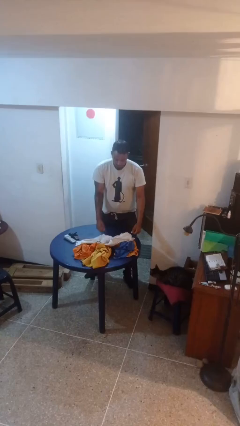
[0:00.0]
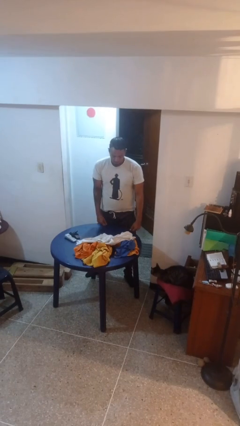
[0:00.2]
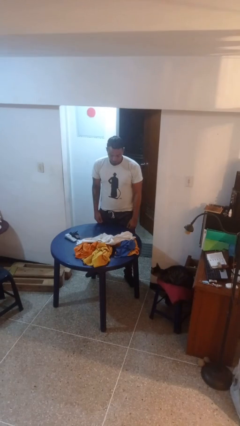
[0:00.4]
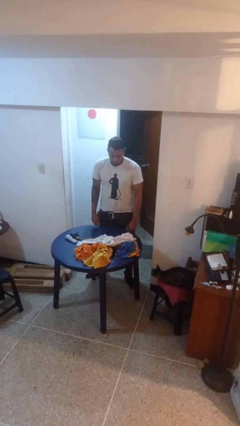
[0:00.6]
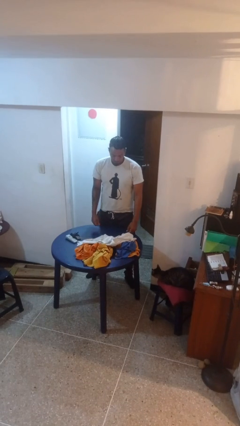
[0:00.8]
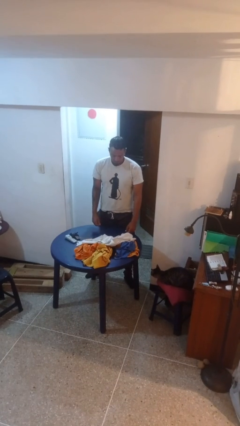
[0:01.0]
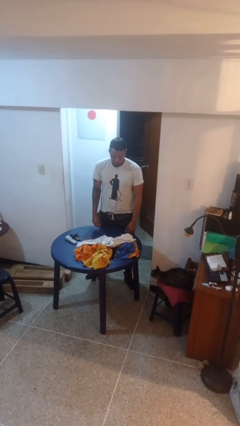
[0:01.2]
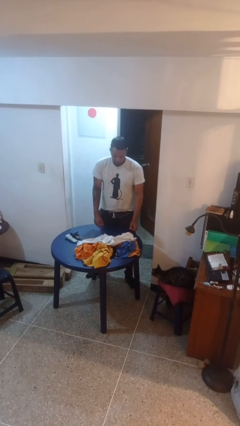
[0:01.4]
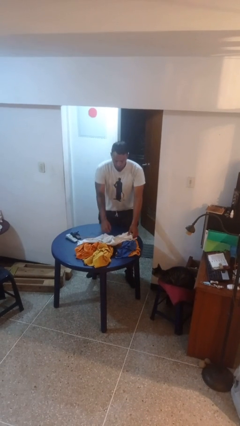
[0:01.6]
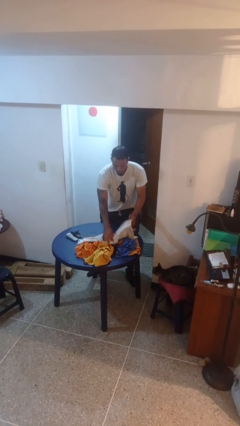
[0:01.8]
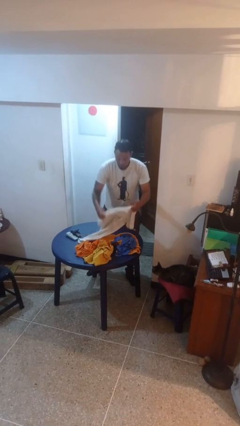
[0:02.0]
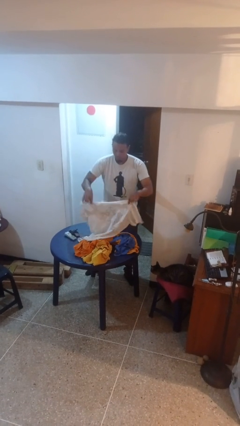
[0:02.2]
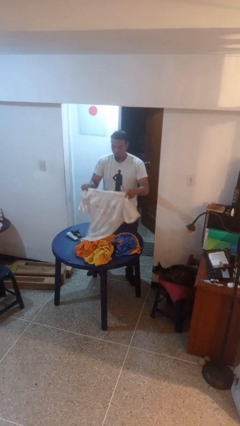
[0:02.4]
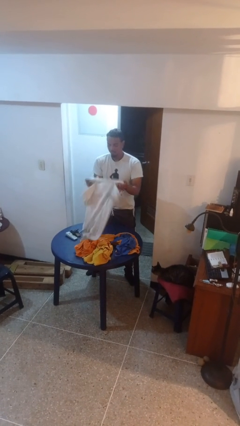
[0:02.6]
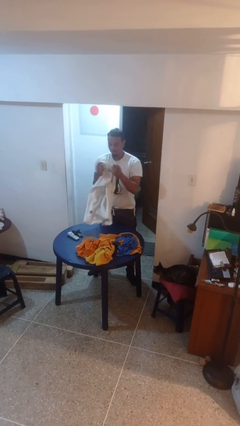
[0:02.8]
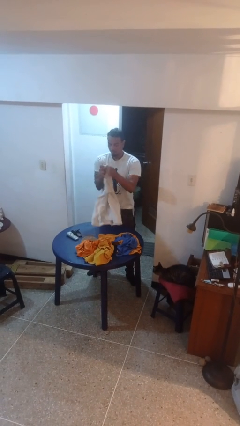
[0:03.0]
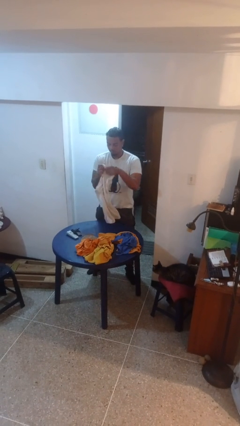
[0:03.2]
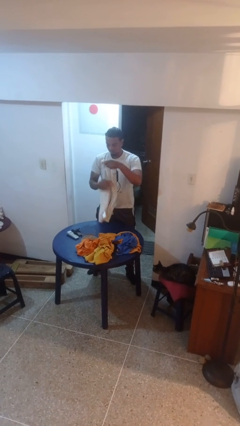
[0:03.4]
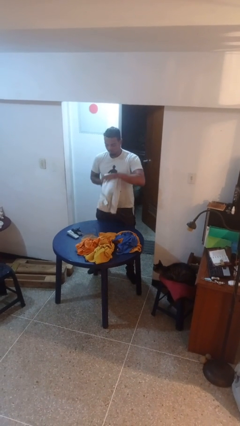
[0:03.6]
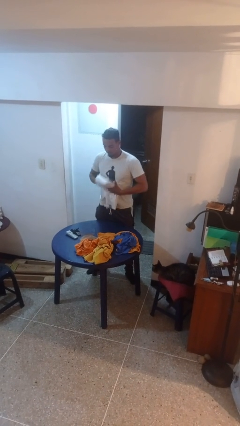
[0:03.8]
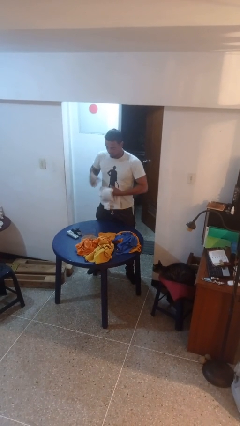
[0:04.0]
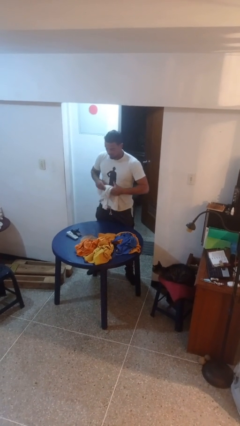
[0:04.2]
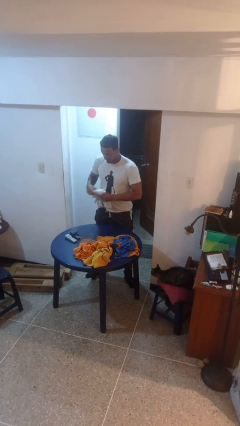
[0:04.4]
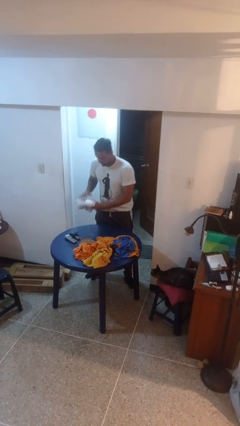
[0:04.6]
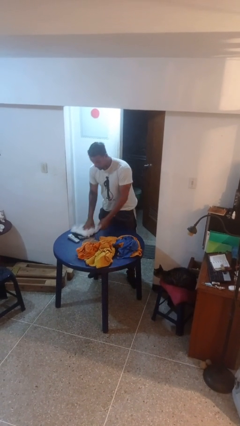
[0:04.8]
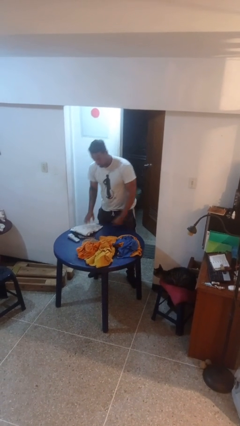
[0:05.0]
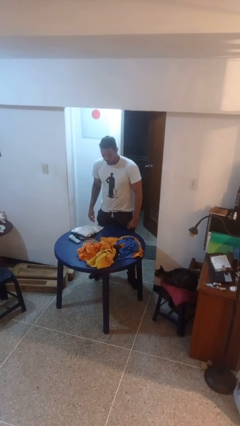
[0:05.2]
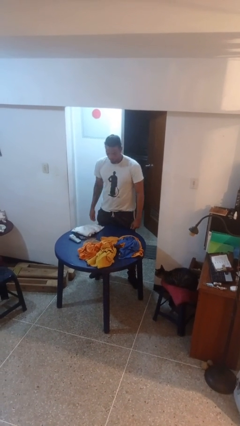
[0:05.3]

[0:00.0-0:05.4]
person folds shirt

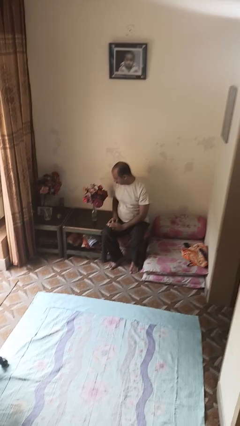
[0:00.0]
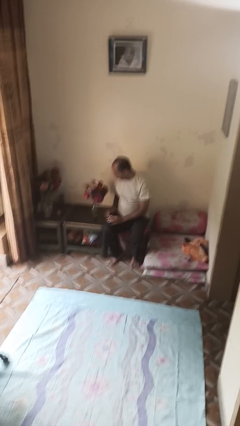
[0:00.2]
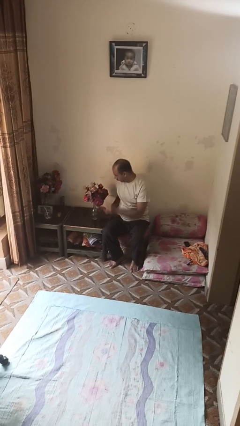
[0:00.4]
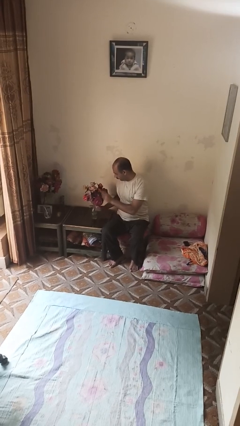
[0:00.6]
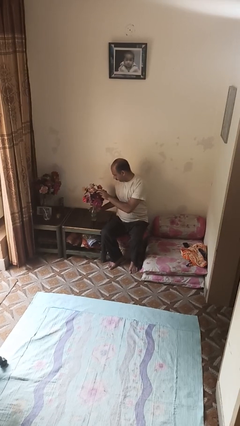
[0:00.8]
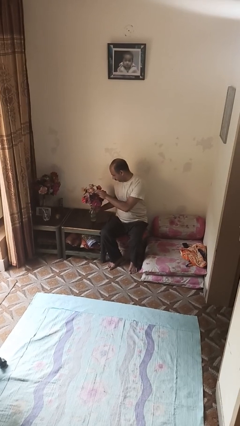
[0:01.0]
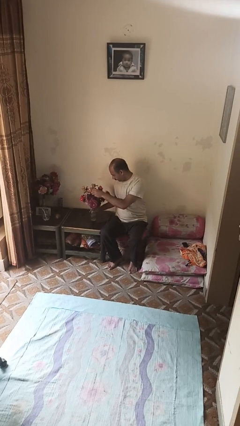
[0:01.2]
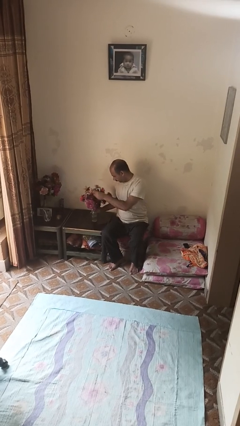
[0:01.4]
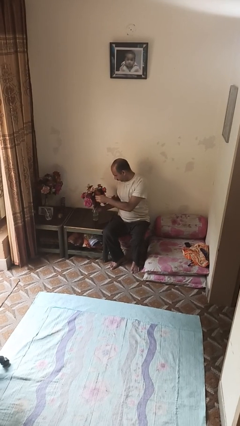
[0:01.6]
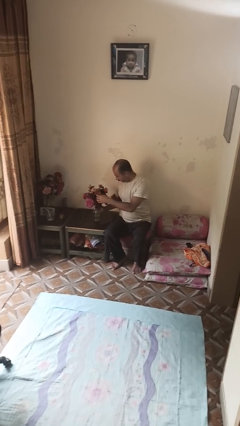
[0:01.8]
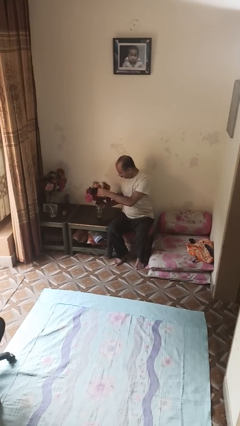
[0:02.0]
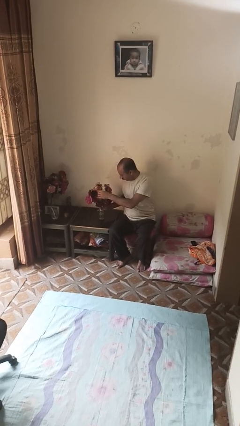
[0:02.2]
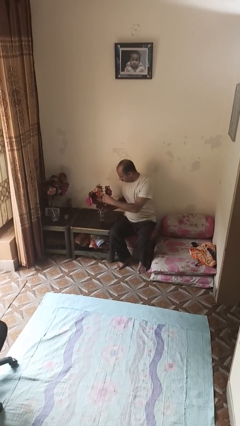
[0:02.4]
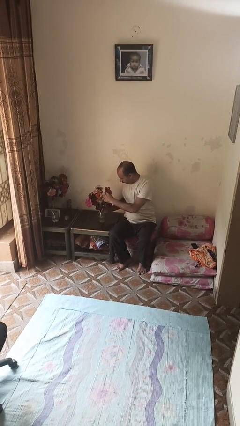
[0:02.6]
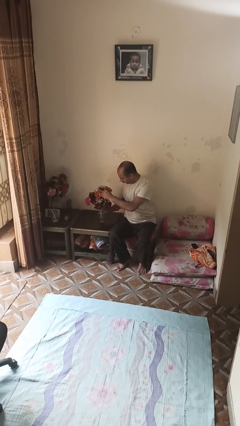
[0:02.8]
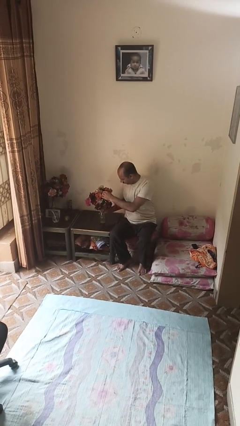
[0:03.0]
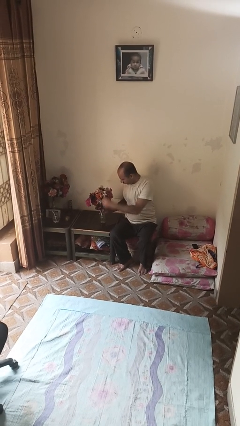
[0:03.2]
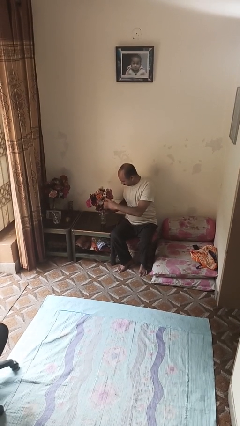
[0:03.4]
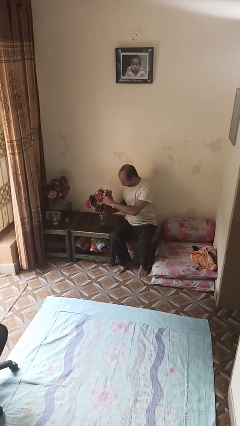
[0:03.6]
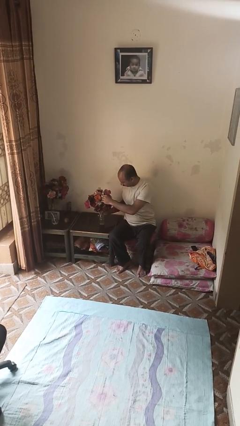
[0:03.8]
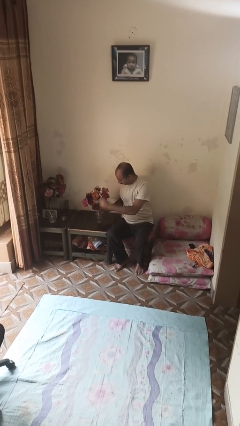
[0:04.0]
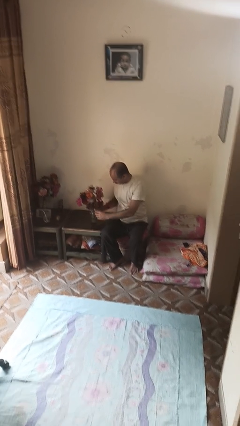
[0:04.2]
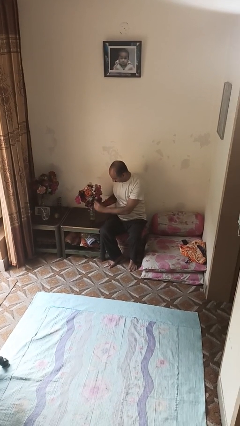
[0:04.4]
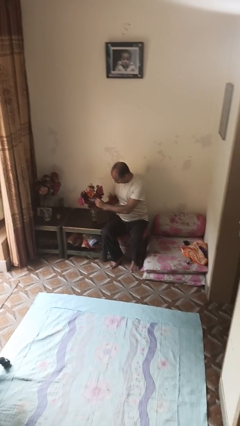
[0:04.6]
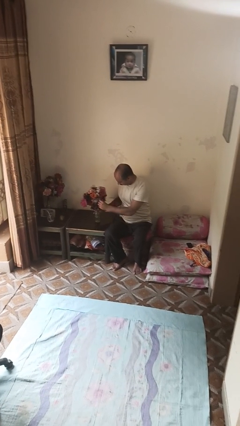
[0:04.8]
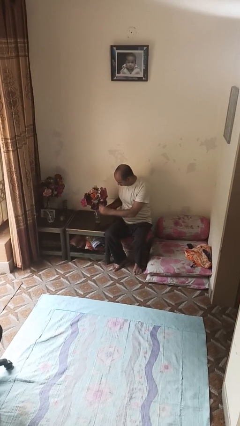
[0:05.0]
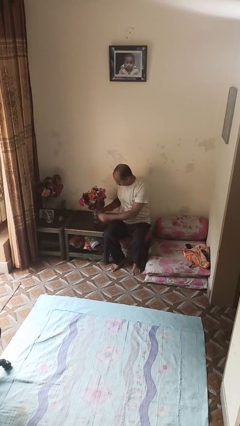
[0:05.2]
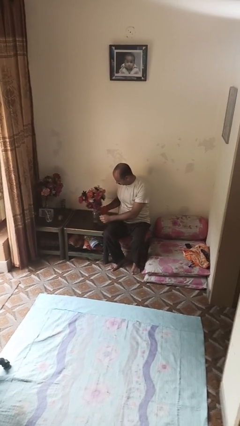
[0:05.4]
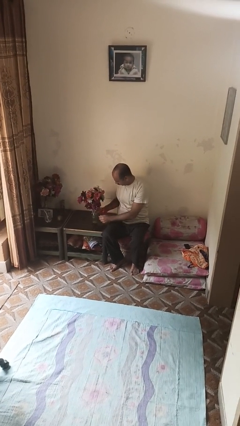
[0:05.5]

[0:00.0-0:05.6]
person arranges flowers in vase

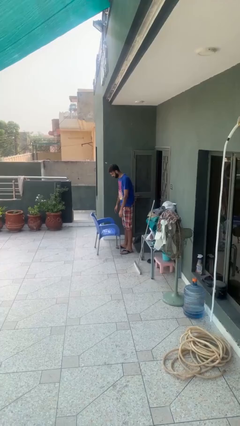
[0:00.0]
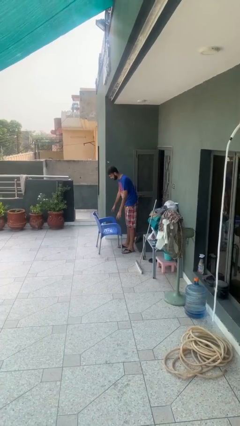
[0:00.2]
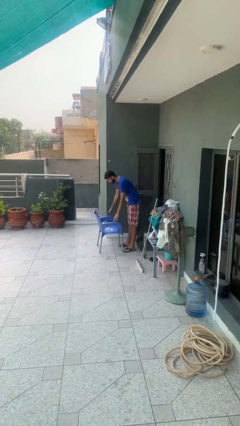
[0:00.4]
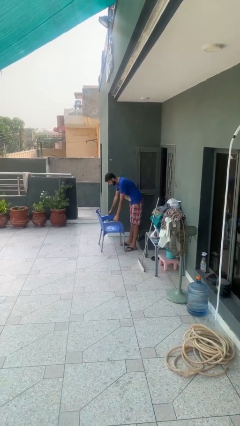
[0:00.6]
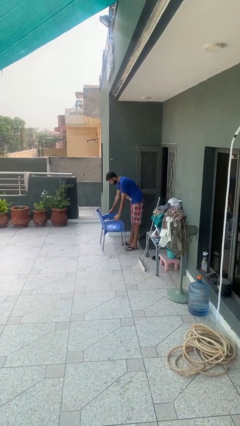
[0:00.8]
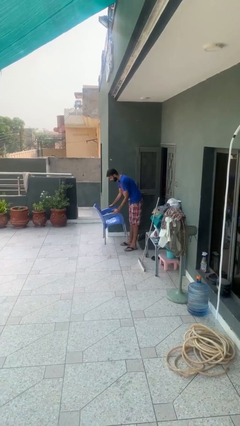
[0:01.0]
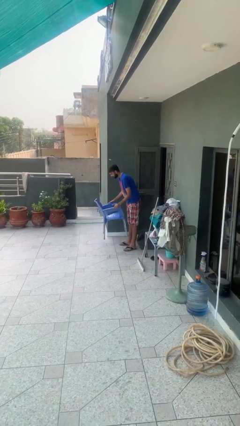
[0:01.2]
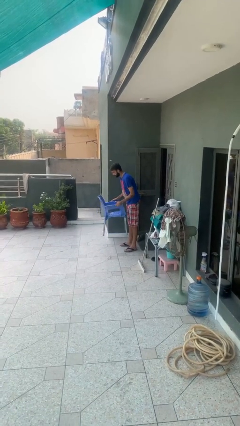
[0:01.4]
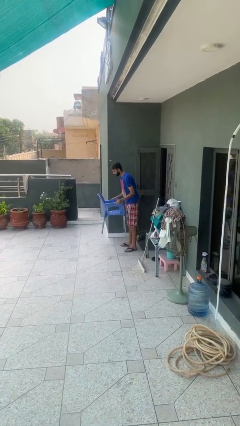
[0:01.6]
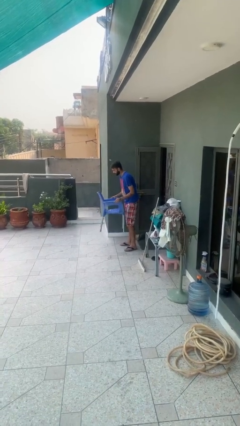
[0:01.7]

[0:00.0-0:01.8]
person picks up object from floor

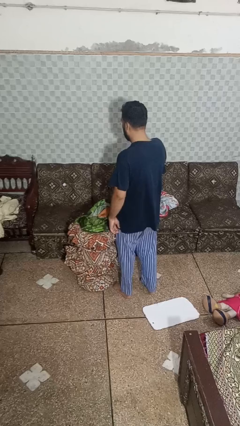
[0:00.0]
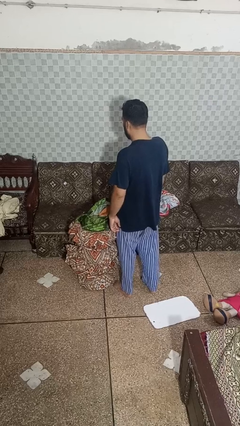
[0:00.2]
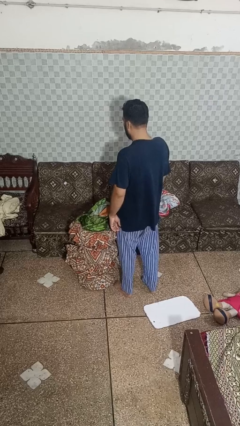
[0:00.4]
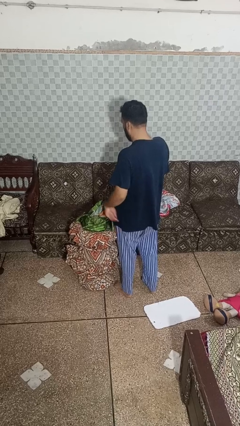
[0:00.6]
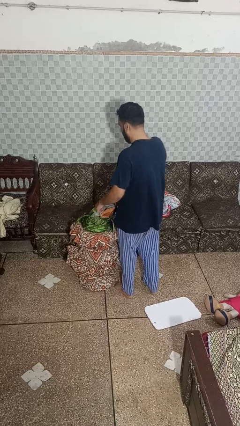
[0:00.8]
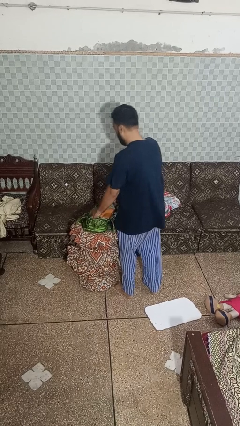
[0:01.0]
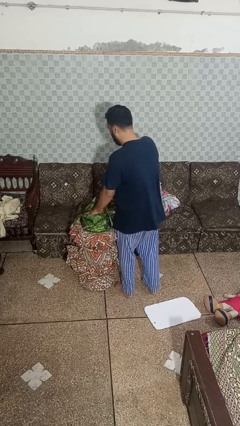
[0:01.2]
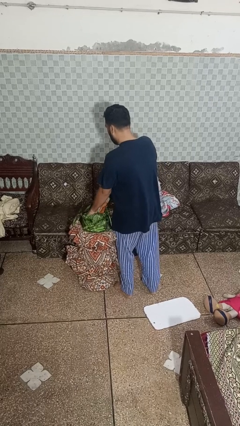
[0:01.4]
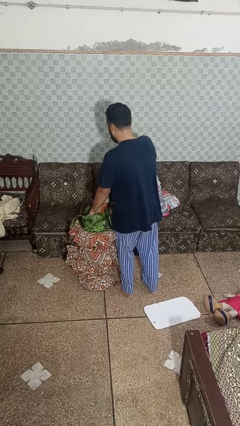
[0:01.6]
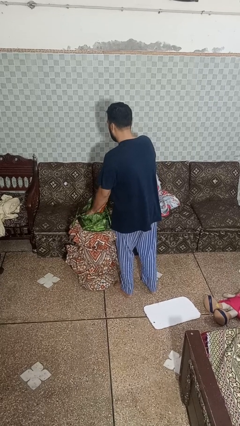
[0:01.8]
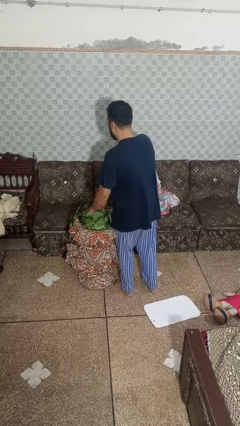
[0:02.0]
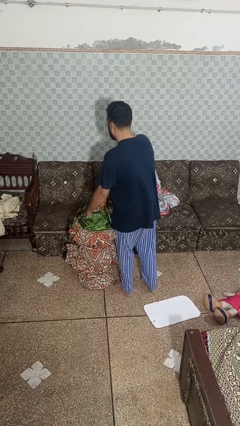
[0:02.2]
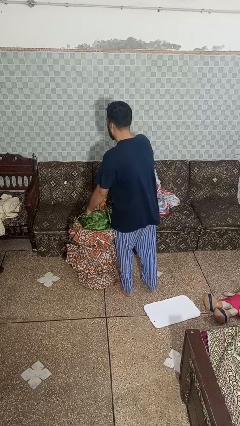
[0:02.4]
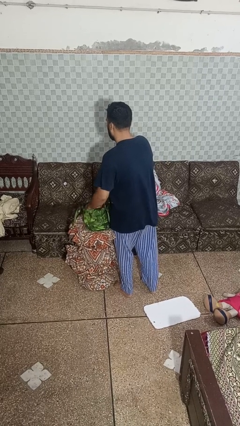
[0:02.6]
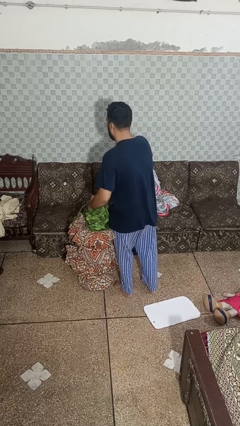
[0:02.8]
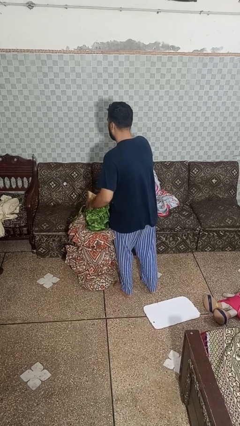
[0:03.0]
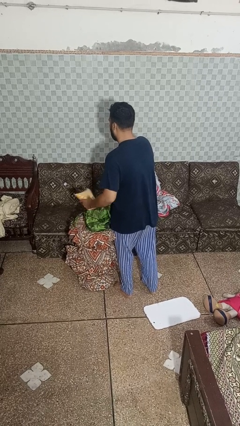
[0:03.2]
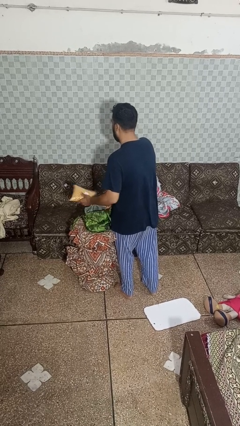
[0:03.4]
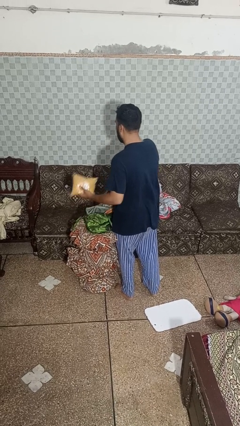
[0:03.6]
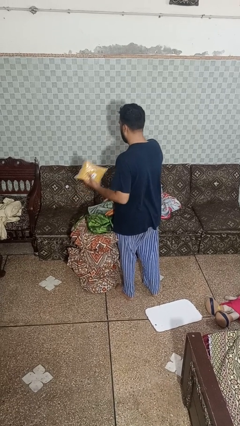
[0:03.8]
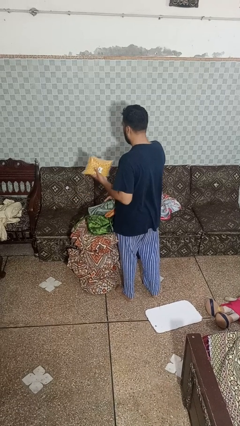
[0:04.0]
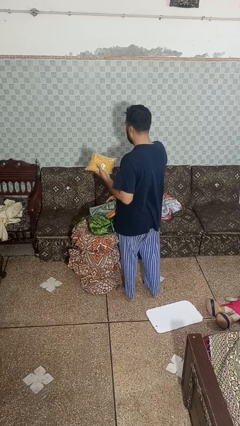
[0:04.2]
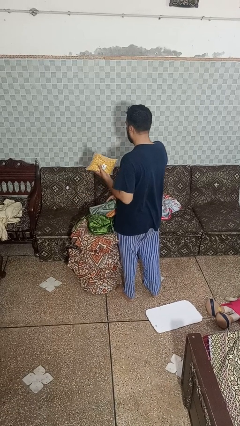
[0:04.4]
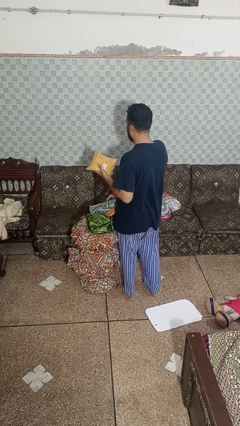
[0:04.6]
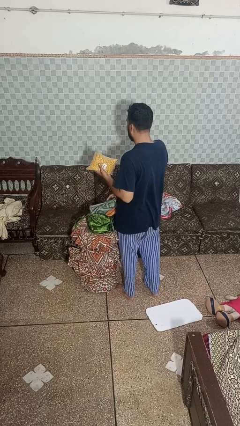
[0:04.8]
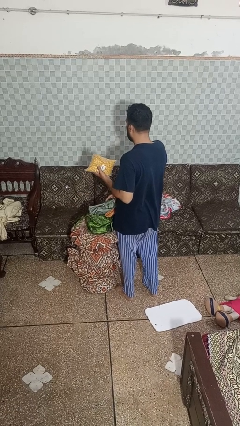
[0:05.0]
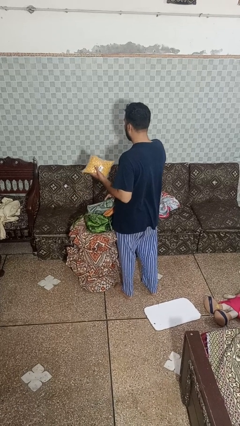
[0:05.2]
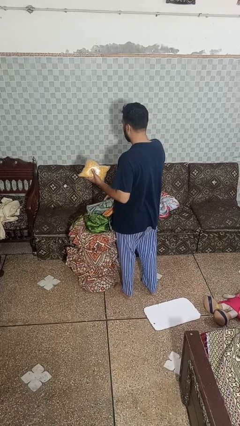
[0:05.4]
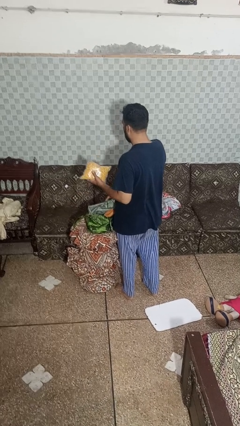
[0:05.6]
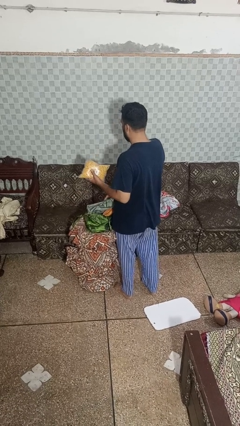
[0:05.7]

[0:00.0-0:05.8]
person takes object from bag
